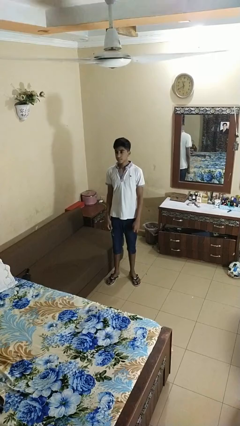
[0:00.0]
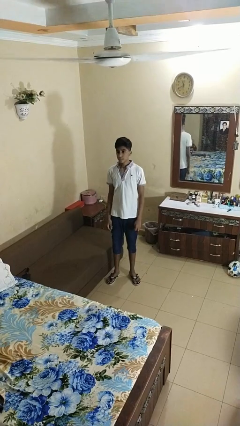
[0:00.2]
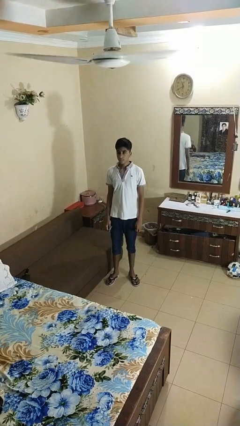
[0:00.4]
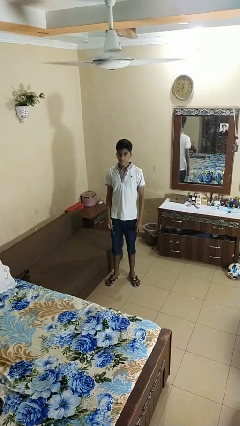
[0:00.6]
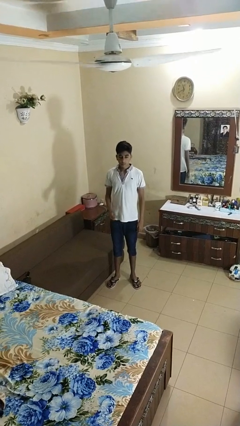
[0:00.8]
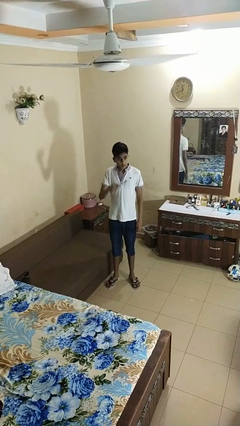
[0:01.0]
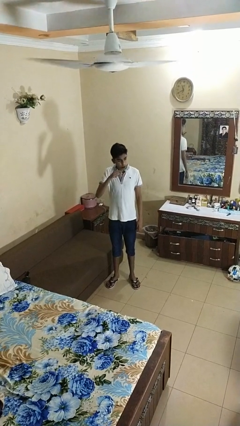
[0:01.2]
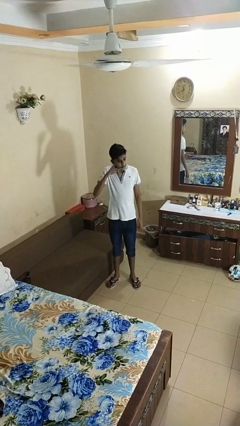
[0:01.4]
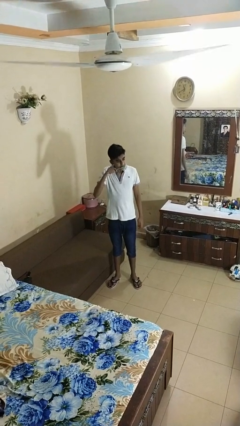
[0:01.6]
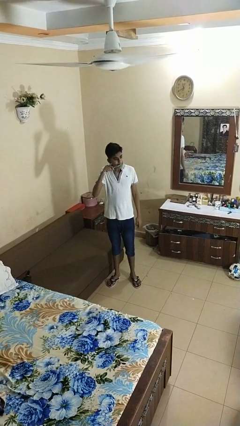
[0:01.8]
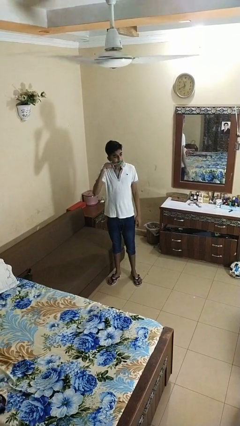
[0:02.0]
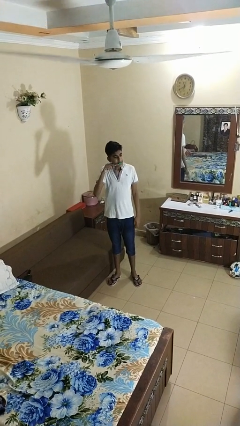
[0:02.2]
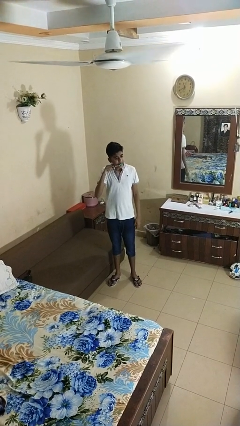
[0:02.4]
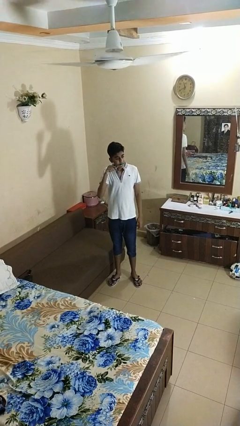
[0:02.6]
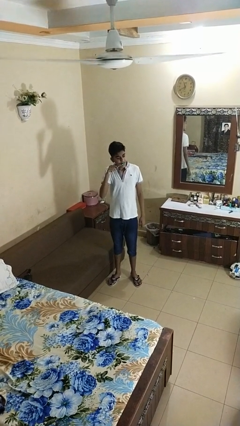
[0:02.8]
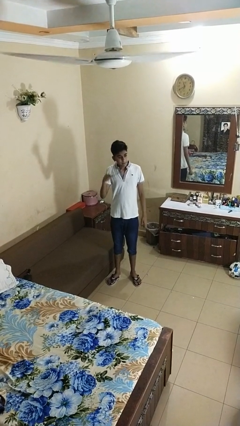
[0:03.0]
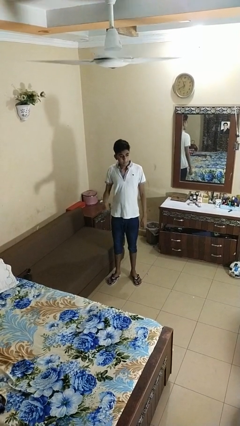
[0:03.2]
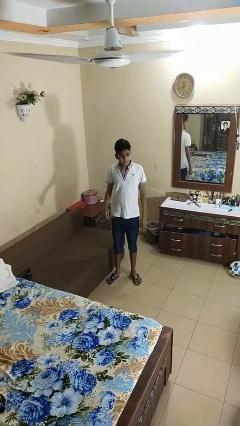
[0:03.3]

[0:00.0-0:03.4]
person brushes teeth

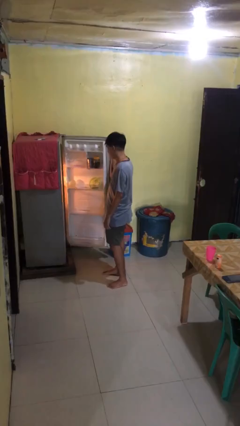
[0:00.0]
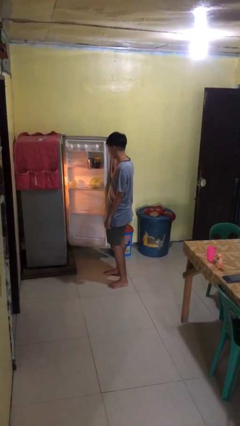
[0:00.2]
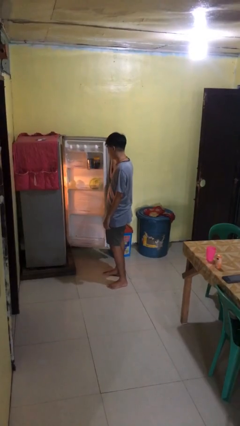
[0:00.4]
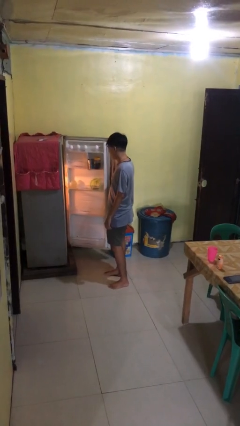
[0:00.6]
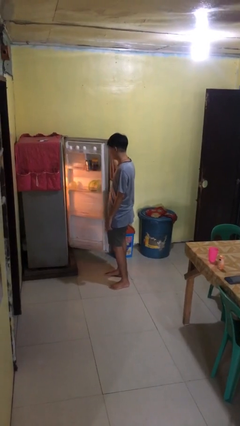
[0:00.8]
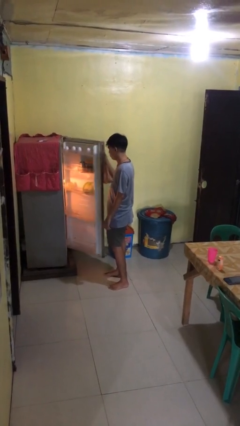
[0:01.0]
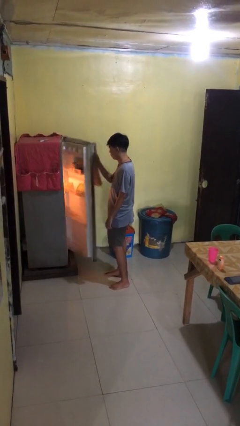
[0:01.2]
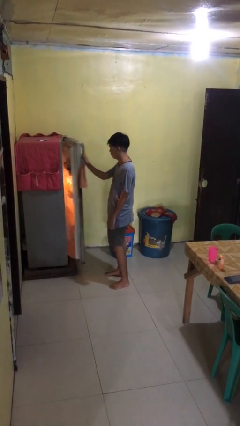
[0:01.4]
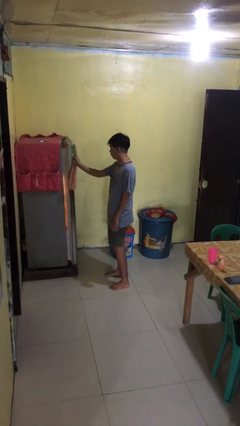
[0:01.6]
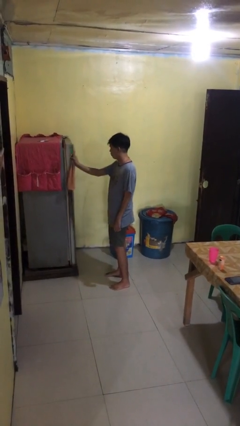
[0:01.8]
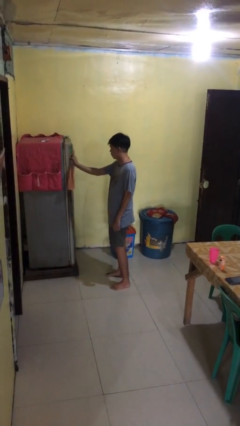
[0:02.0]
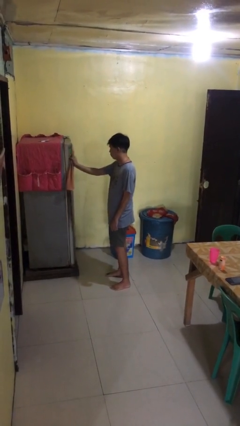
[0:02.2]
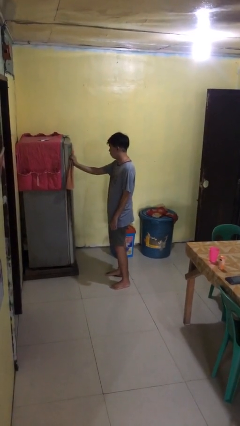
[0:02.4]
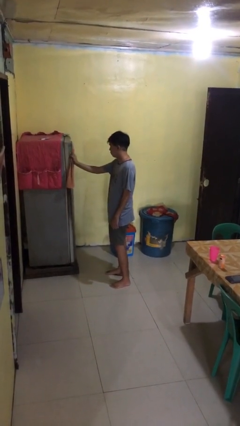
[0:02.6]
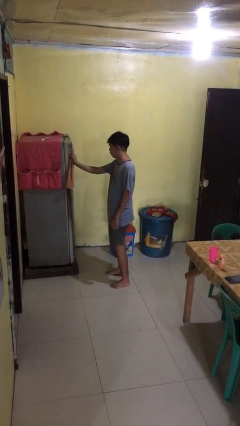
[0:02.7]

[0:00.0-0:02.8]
person closes refrigerator

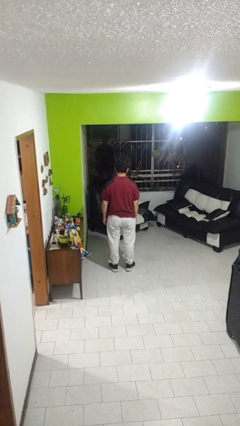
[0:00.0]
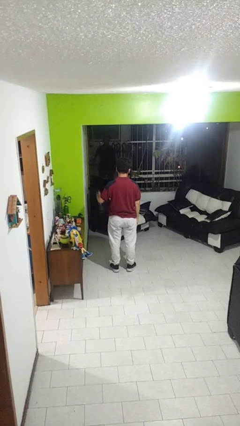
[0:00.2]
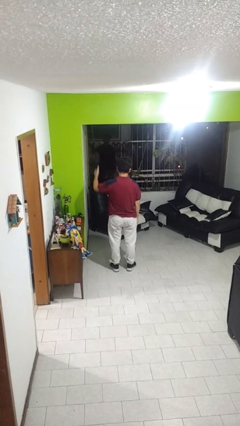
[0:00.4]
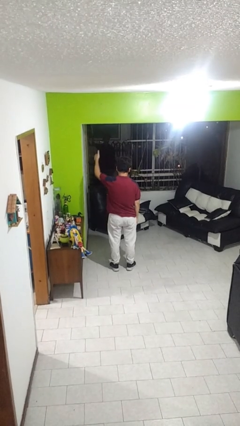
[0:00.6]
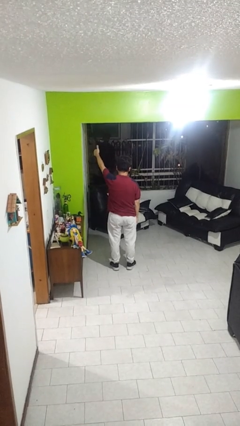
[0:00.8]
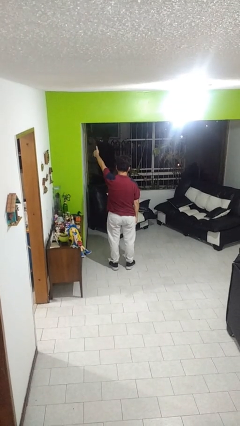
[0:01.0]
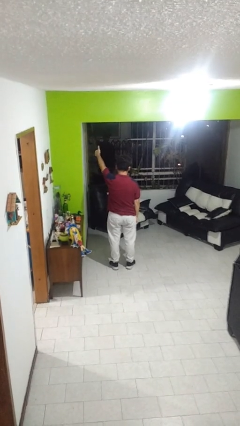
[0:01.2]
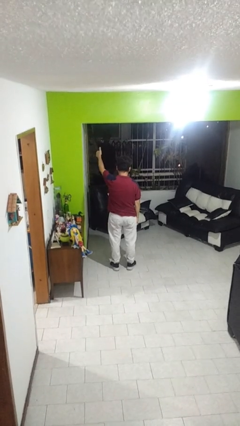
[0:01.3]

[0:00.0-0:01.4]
person gestures thumbs up

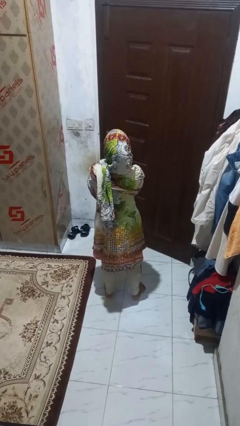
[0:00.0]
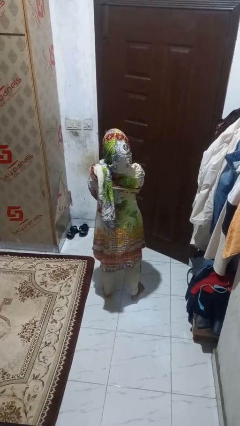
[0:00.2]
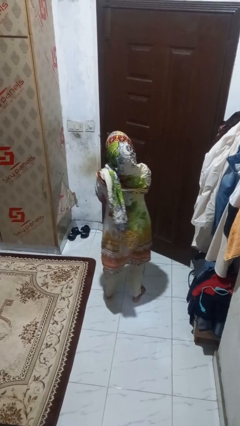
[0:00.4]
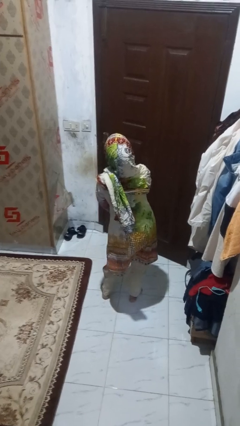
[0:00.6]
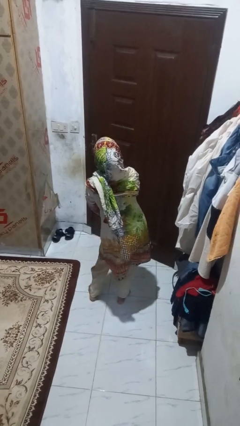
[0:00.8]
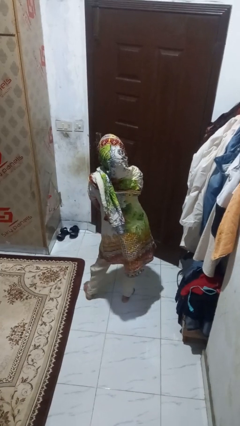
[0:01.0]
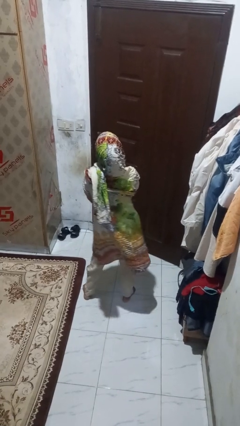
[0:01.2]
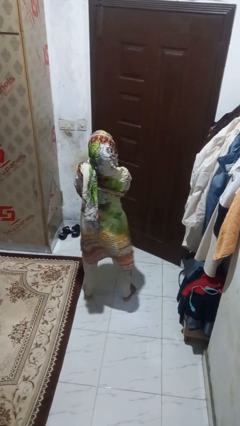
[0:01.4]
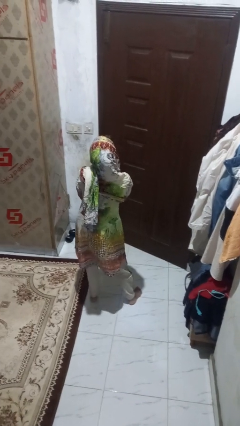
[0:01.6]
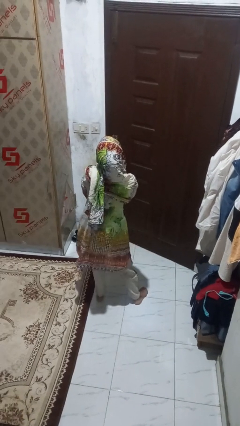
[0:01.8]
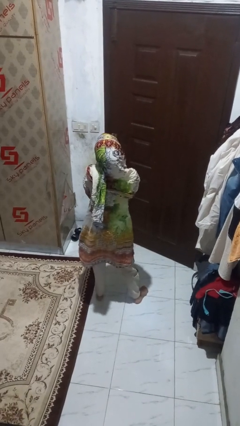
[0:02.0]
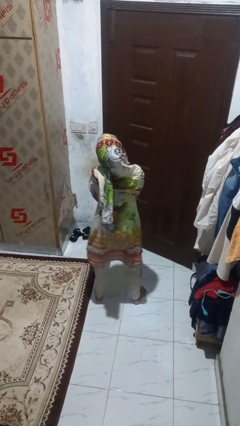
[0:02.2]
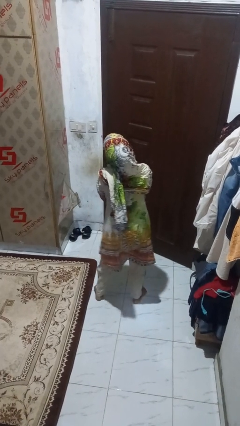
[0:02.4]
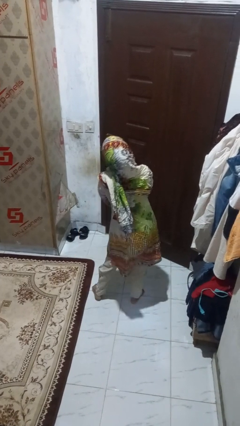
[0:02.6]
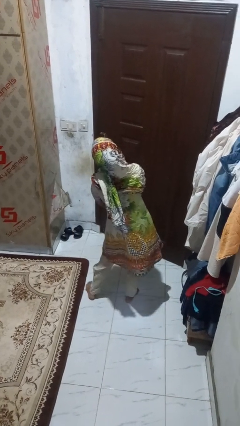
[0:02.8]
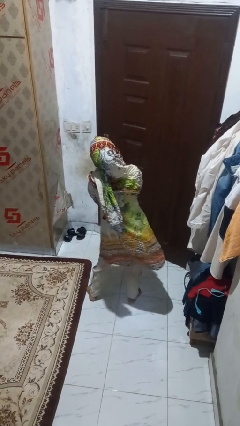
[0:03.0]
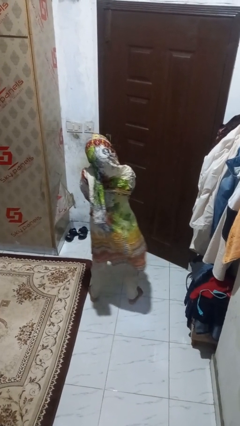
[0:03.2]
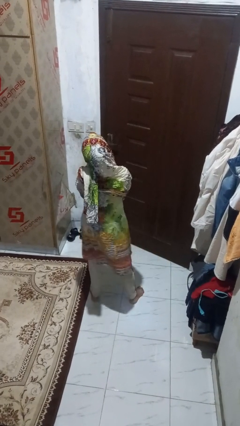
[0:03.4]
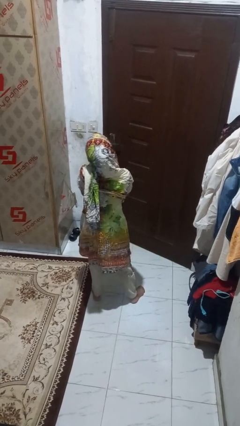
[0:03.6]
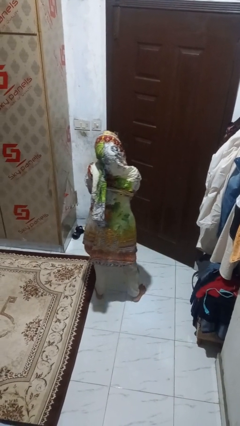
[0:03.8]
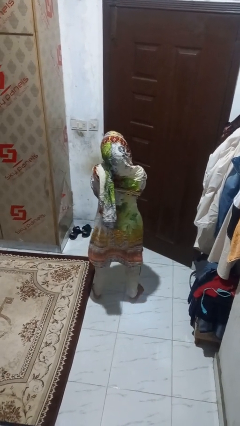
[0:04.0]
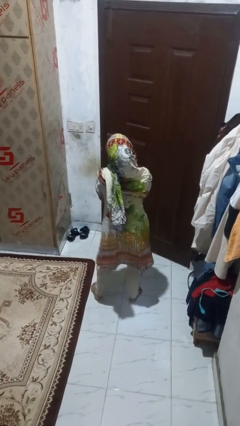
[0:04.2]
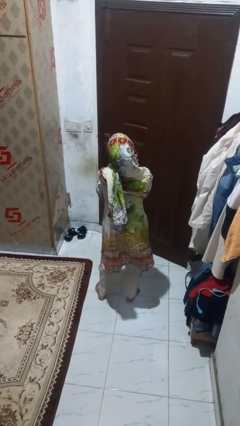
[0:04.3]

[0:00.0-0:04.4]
person wiggles hips

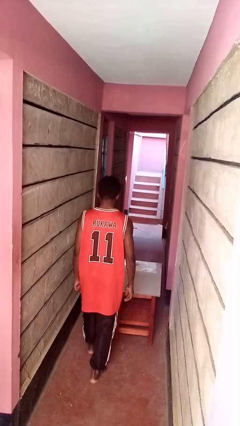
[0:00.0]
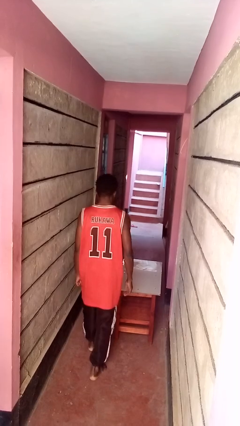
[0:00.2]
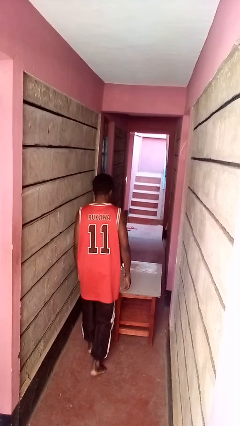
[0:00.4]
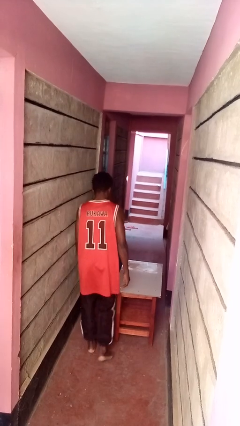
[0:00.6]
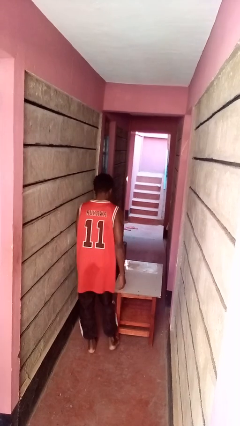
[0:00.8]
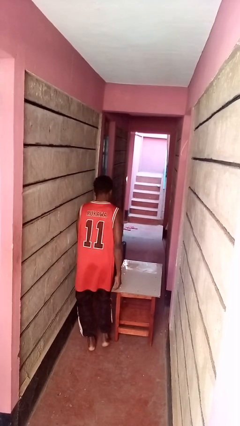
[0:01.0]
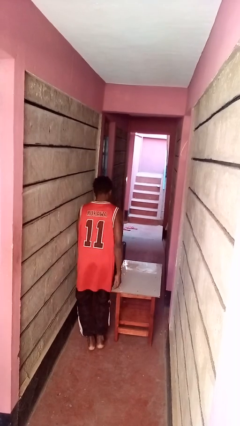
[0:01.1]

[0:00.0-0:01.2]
person stubs toe

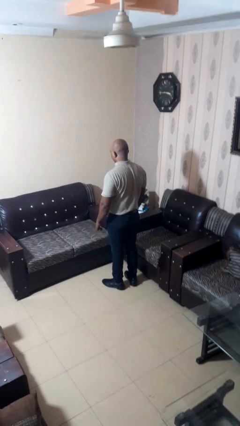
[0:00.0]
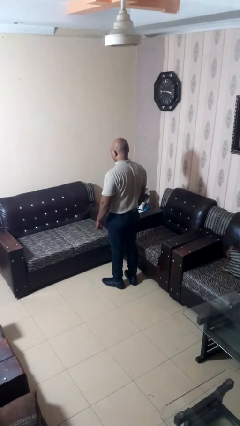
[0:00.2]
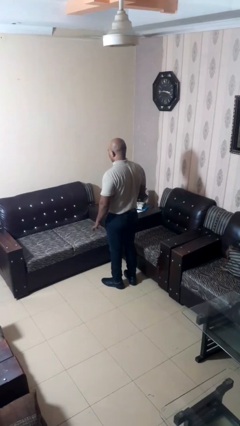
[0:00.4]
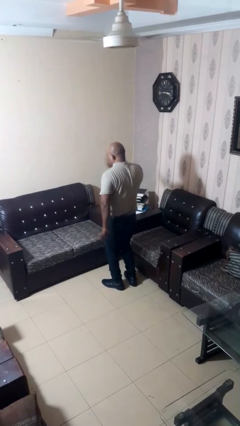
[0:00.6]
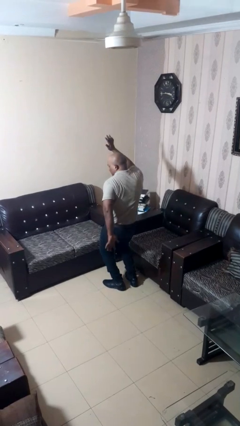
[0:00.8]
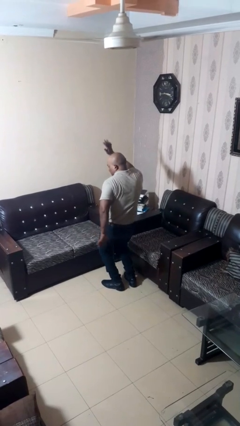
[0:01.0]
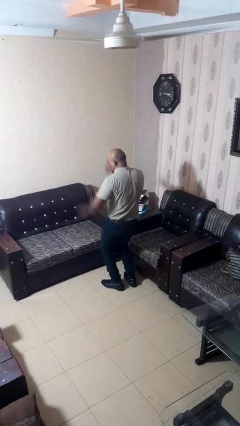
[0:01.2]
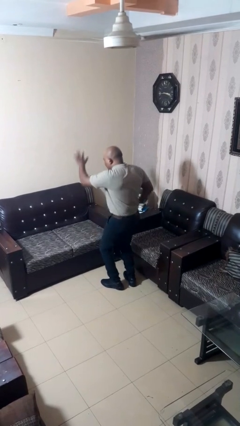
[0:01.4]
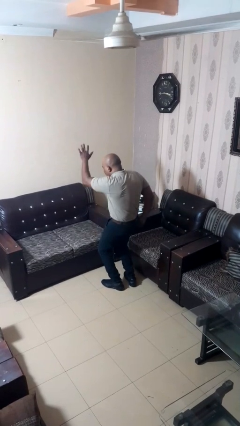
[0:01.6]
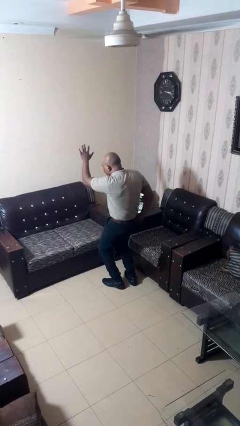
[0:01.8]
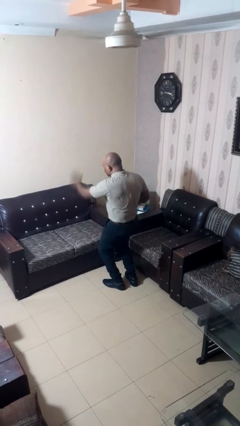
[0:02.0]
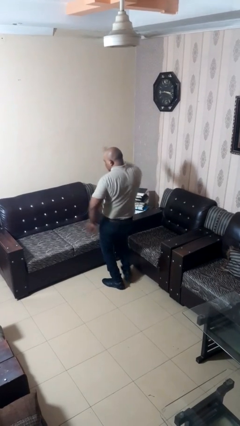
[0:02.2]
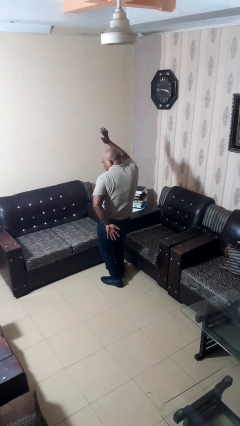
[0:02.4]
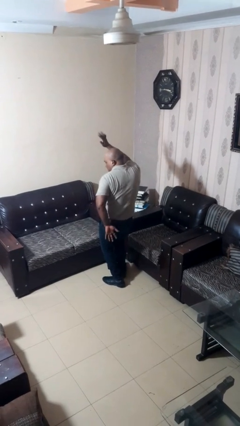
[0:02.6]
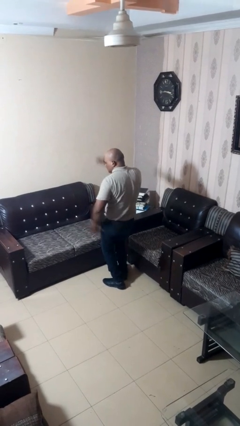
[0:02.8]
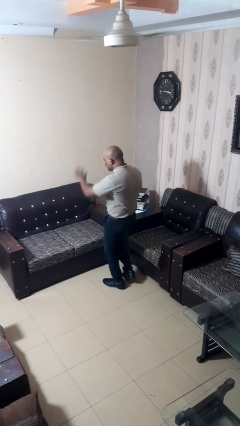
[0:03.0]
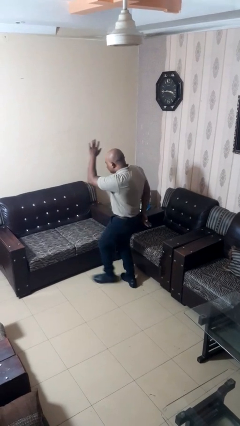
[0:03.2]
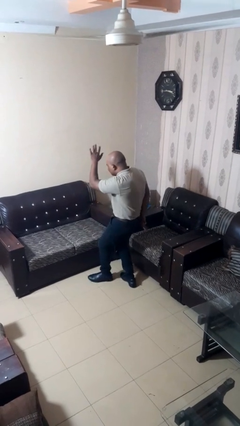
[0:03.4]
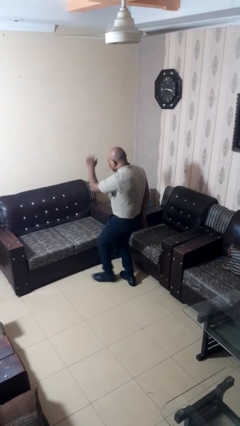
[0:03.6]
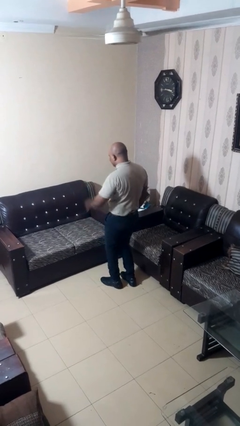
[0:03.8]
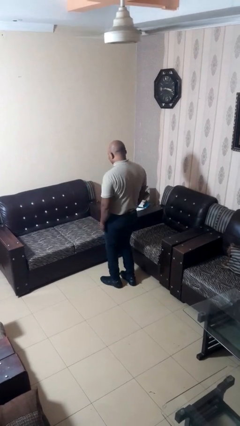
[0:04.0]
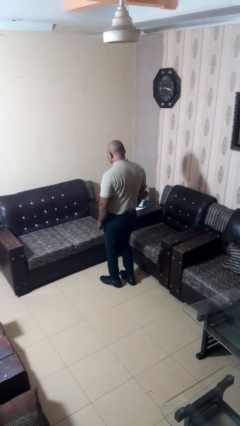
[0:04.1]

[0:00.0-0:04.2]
person dances in place
